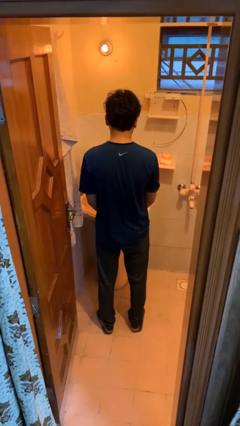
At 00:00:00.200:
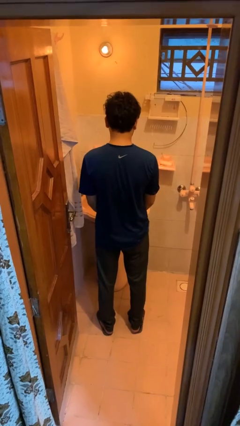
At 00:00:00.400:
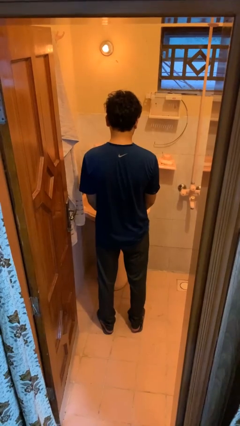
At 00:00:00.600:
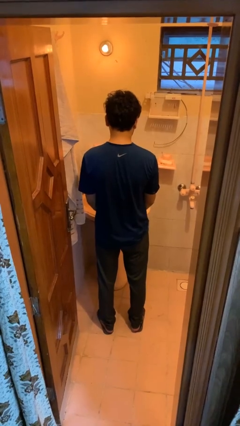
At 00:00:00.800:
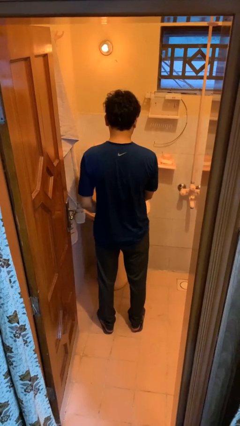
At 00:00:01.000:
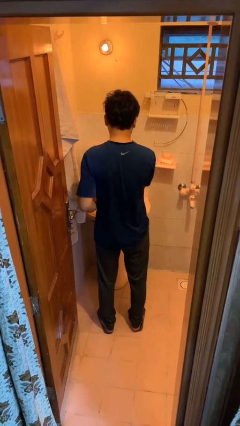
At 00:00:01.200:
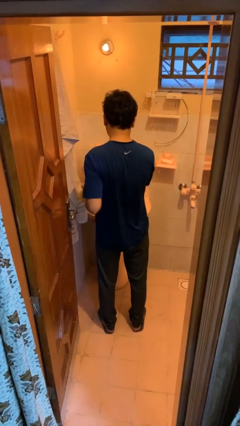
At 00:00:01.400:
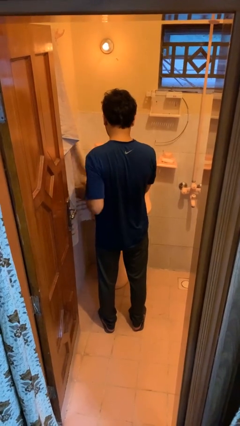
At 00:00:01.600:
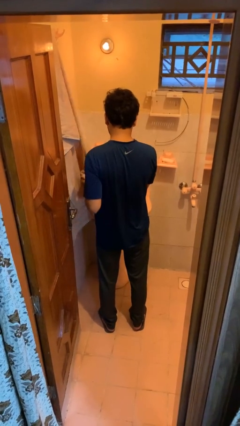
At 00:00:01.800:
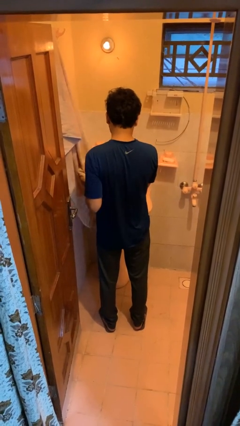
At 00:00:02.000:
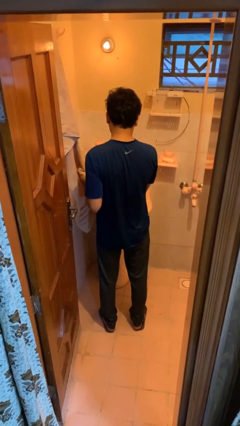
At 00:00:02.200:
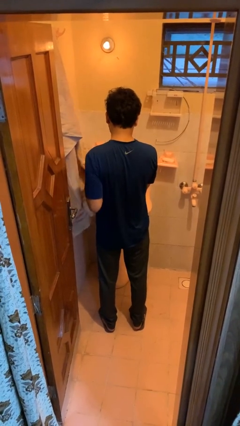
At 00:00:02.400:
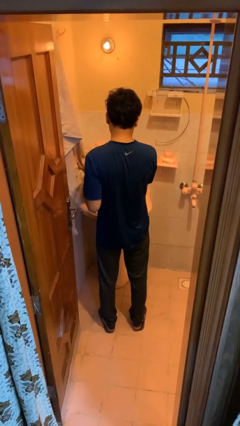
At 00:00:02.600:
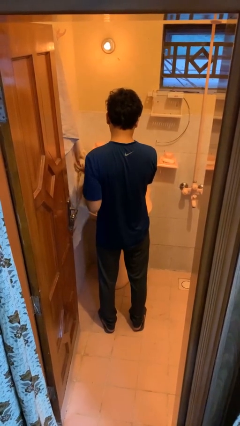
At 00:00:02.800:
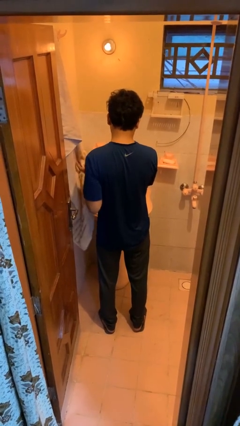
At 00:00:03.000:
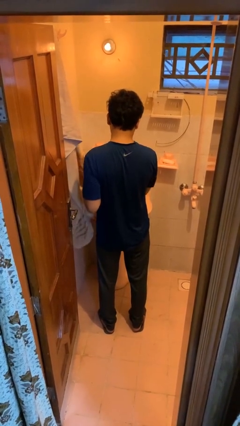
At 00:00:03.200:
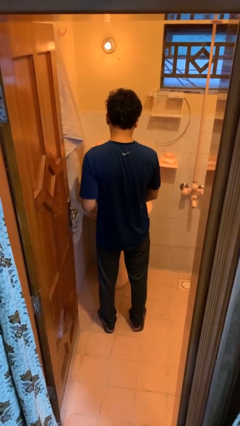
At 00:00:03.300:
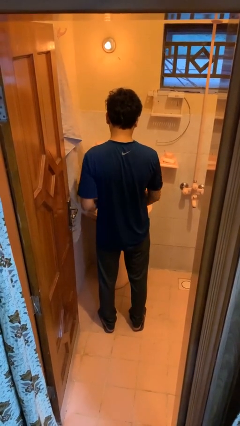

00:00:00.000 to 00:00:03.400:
person dries hands with towel

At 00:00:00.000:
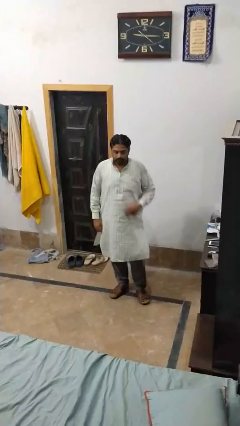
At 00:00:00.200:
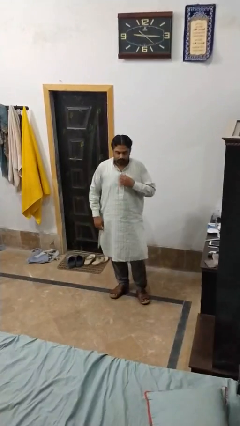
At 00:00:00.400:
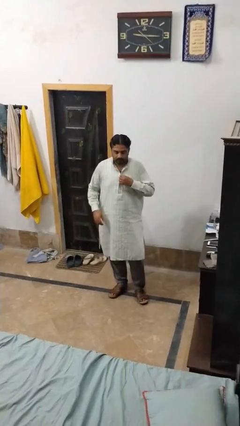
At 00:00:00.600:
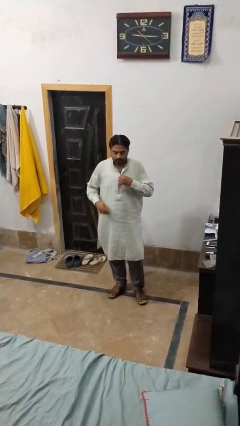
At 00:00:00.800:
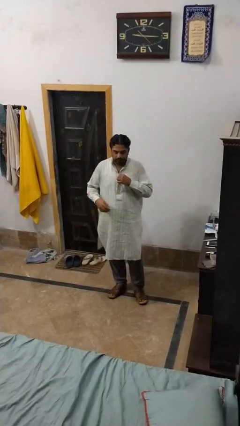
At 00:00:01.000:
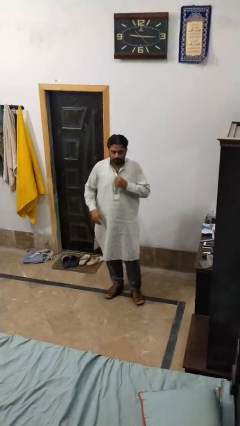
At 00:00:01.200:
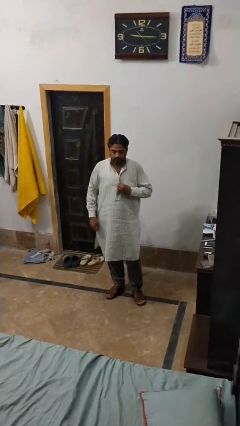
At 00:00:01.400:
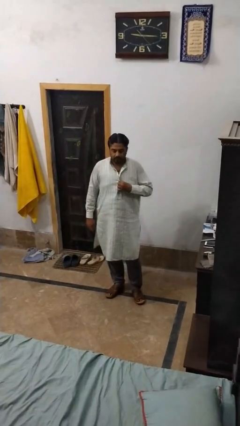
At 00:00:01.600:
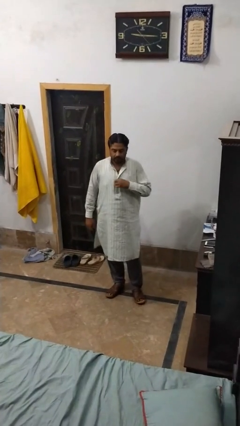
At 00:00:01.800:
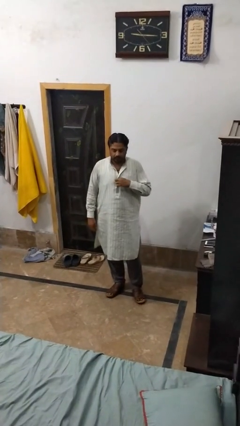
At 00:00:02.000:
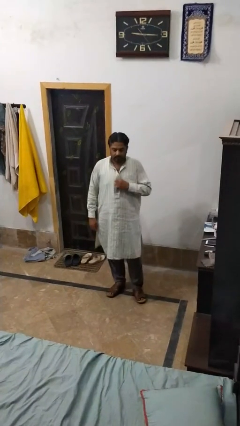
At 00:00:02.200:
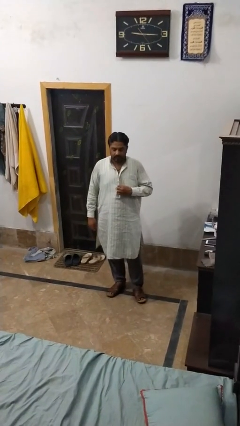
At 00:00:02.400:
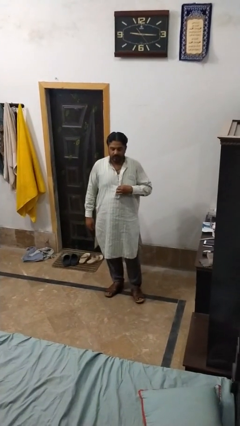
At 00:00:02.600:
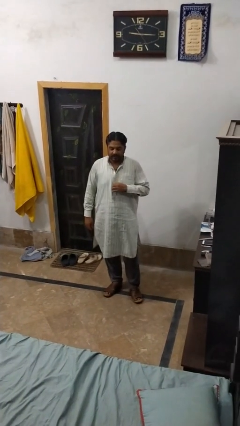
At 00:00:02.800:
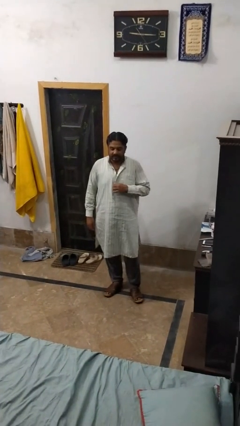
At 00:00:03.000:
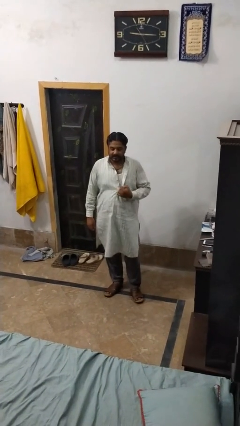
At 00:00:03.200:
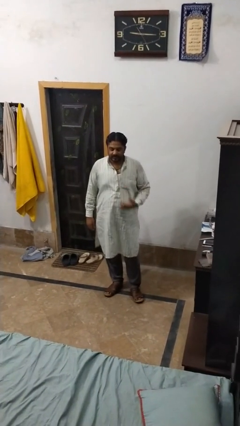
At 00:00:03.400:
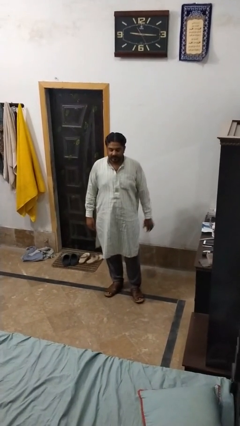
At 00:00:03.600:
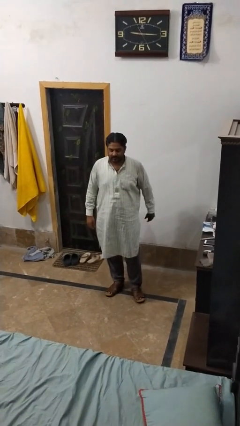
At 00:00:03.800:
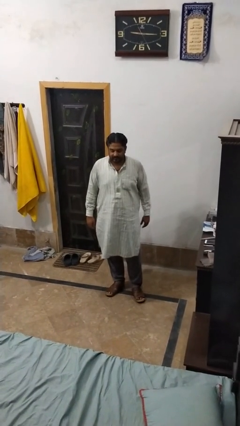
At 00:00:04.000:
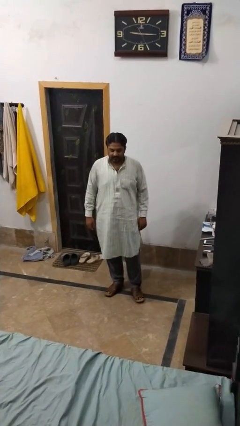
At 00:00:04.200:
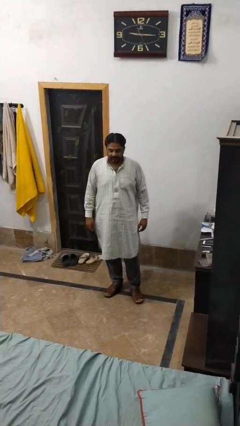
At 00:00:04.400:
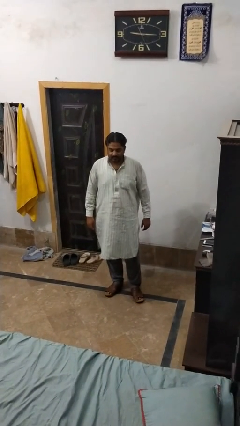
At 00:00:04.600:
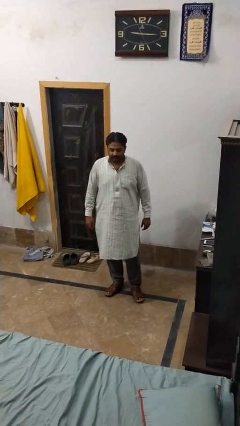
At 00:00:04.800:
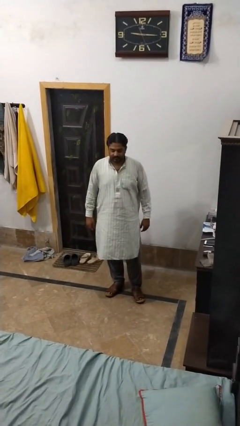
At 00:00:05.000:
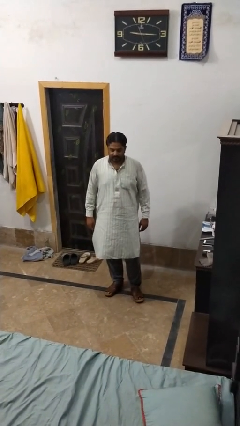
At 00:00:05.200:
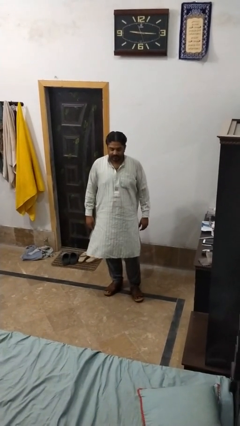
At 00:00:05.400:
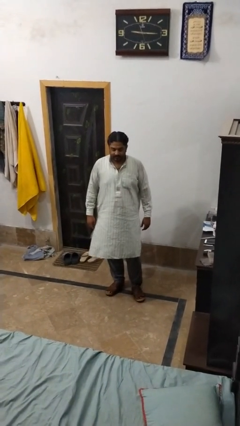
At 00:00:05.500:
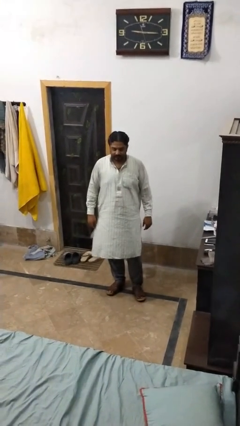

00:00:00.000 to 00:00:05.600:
person unbuttons shirt

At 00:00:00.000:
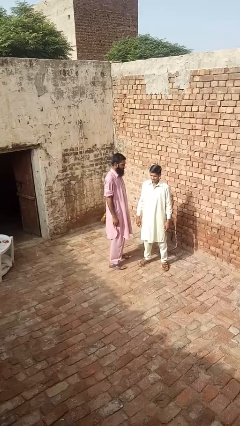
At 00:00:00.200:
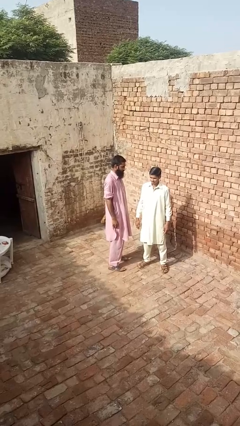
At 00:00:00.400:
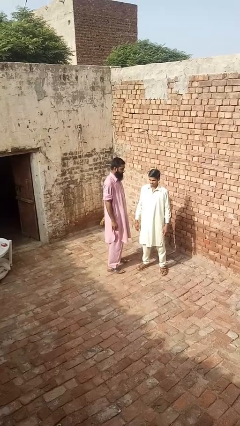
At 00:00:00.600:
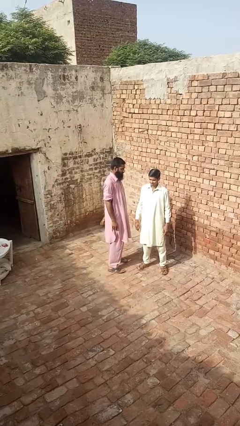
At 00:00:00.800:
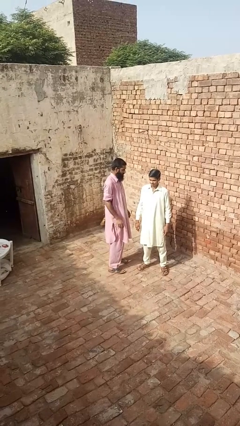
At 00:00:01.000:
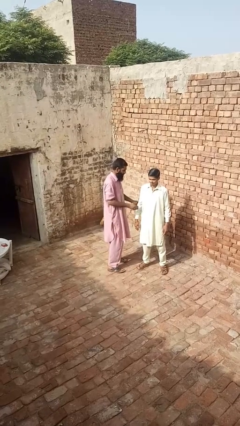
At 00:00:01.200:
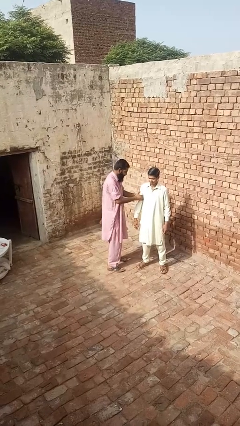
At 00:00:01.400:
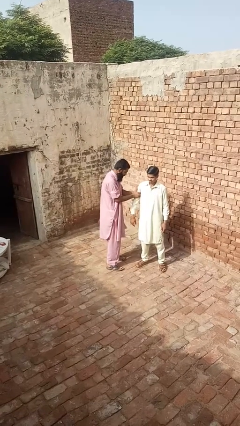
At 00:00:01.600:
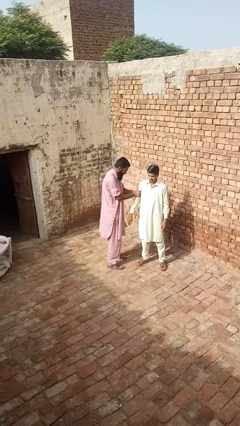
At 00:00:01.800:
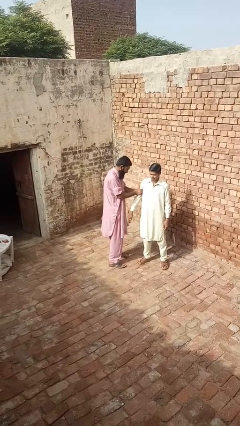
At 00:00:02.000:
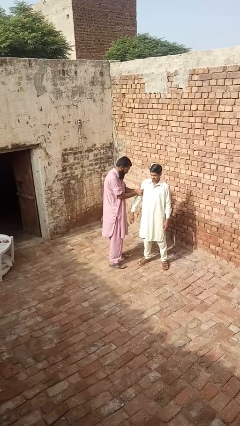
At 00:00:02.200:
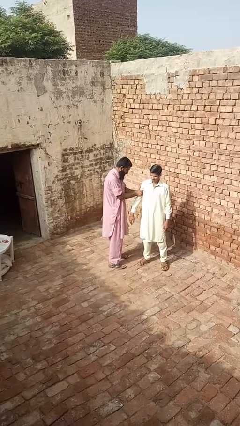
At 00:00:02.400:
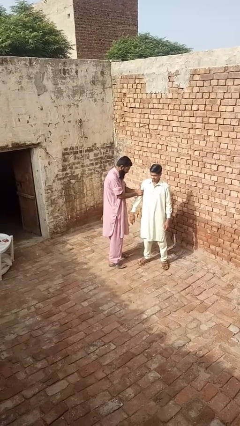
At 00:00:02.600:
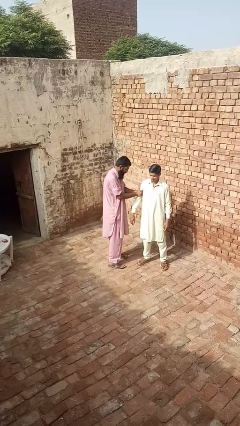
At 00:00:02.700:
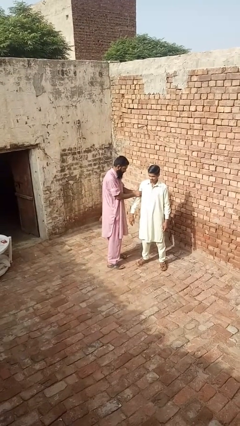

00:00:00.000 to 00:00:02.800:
person grabs person by bicep

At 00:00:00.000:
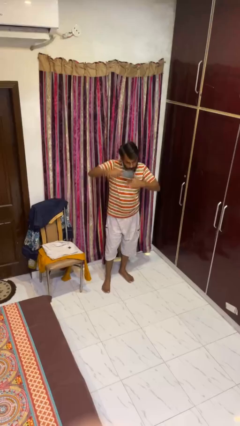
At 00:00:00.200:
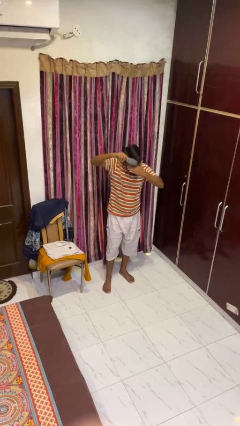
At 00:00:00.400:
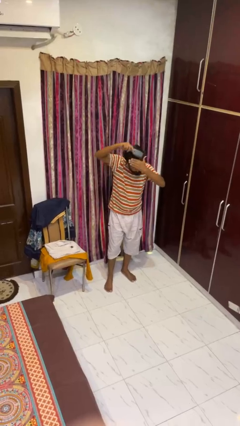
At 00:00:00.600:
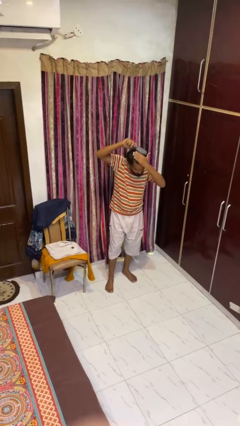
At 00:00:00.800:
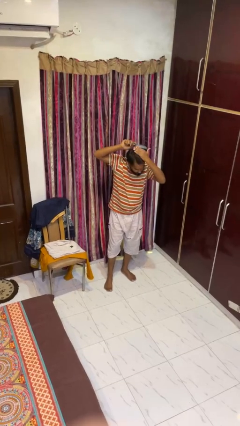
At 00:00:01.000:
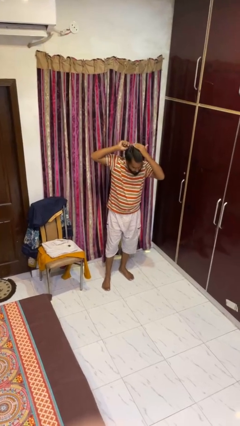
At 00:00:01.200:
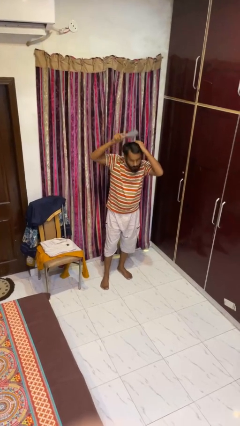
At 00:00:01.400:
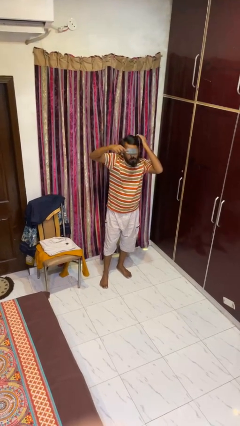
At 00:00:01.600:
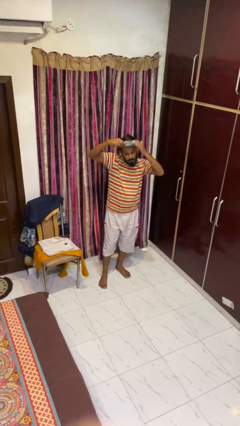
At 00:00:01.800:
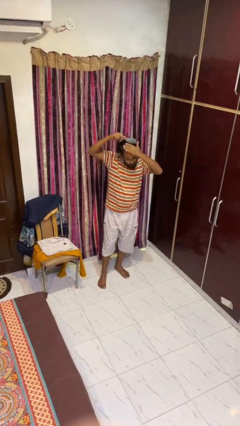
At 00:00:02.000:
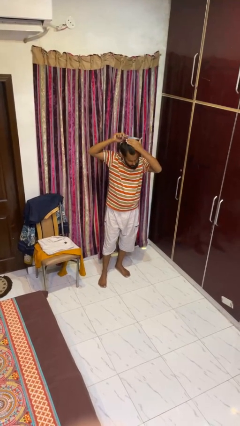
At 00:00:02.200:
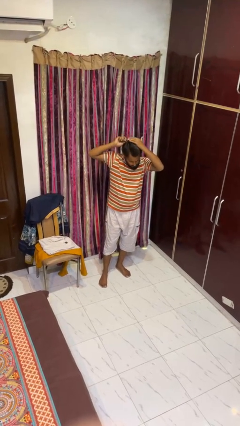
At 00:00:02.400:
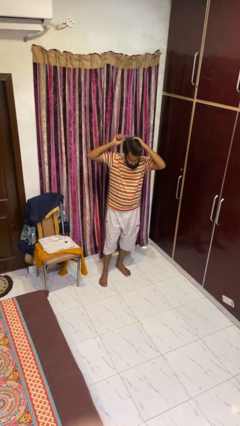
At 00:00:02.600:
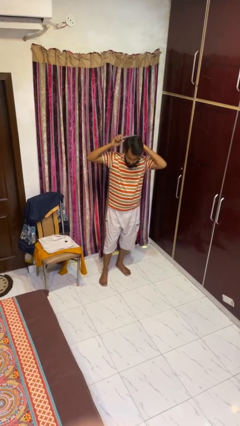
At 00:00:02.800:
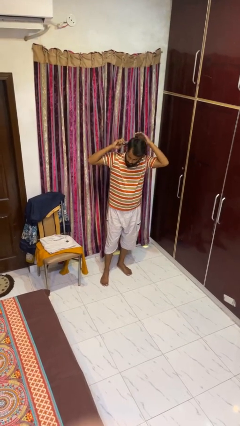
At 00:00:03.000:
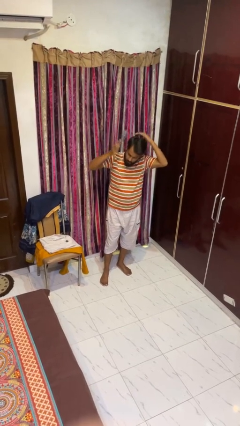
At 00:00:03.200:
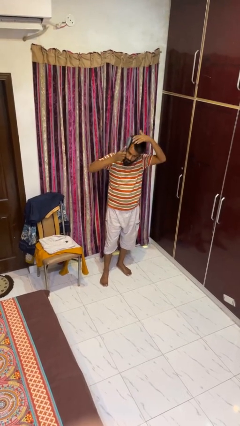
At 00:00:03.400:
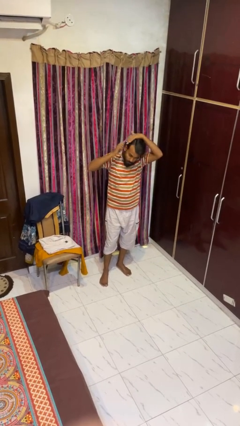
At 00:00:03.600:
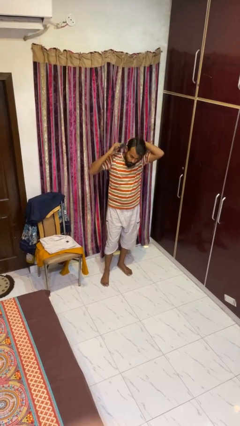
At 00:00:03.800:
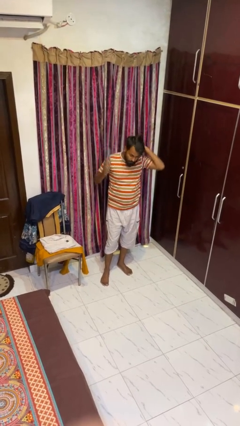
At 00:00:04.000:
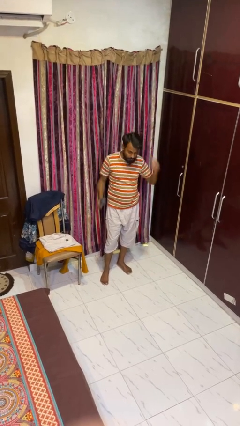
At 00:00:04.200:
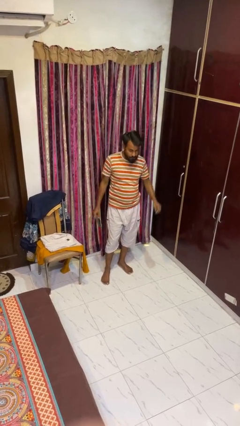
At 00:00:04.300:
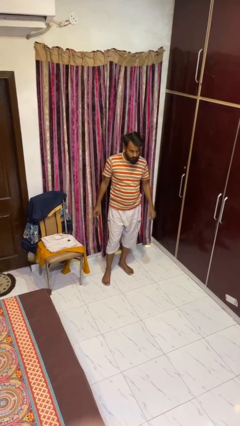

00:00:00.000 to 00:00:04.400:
person brushes hair

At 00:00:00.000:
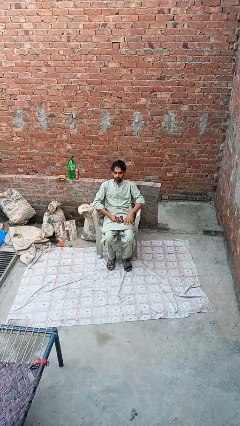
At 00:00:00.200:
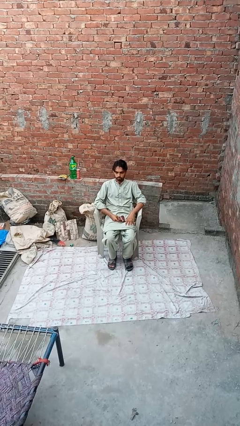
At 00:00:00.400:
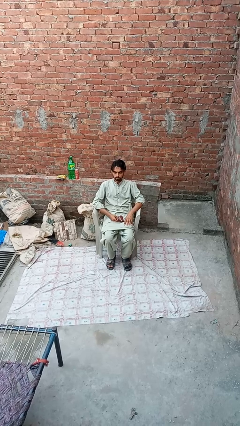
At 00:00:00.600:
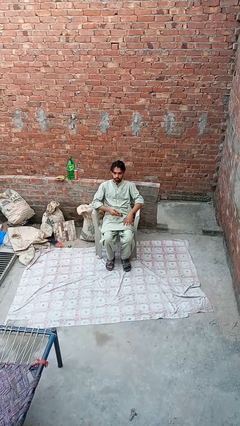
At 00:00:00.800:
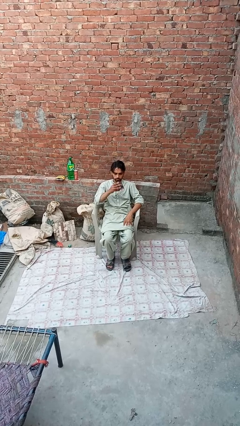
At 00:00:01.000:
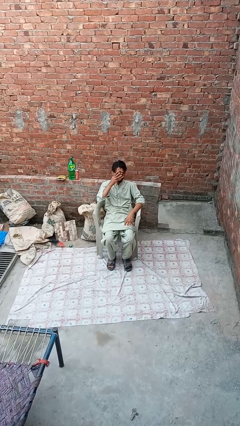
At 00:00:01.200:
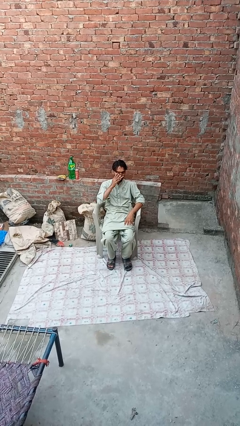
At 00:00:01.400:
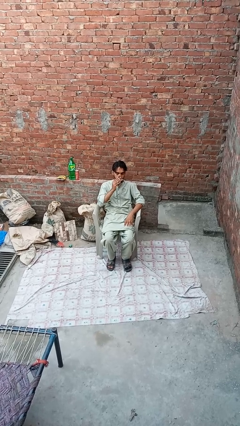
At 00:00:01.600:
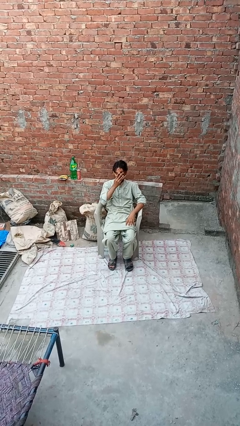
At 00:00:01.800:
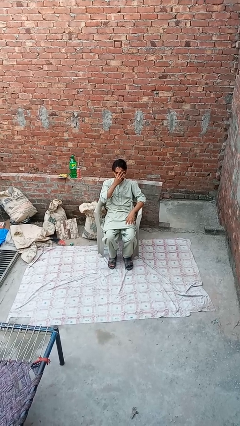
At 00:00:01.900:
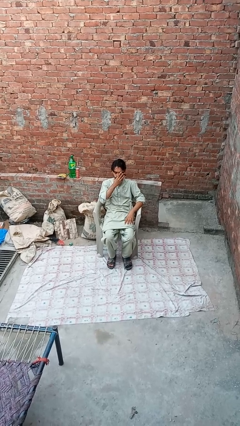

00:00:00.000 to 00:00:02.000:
person wipes mouth with napkin
